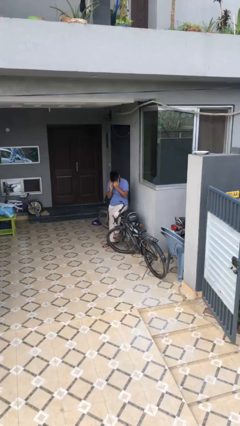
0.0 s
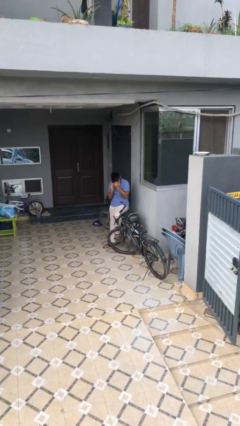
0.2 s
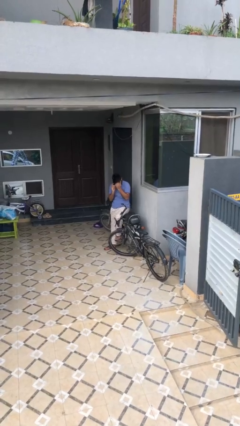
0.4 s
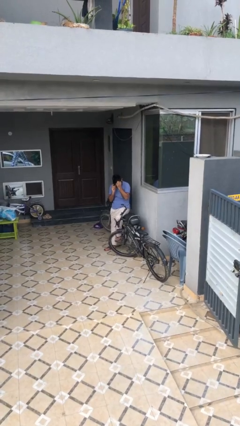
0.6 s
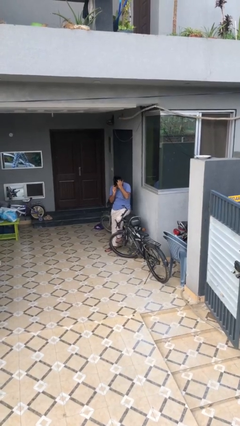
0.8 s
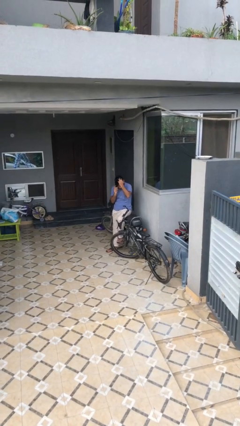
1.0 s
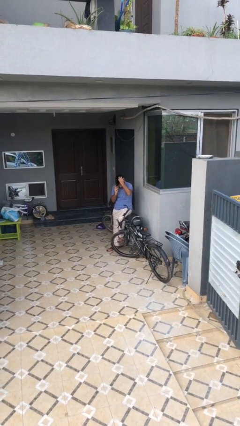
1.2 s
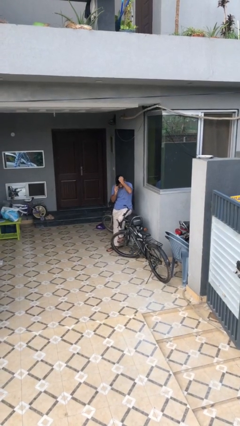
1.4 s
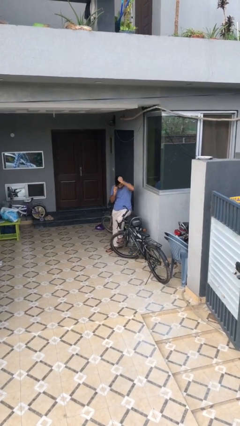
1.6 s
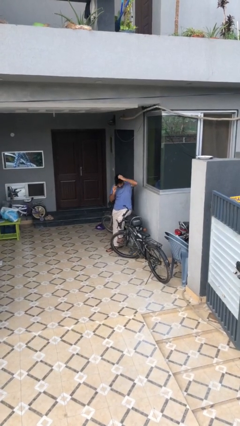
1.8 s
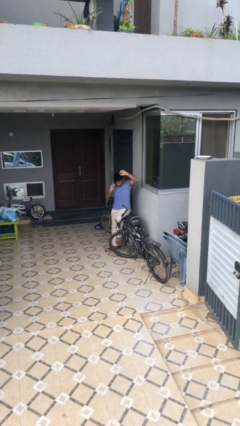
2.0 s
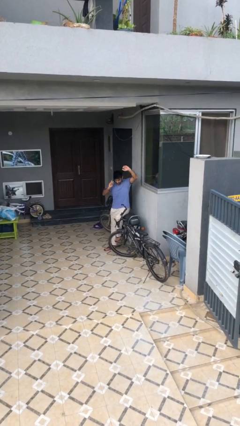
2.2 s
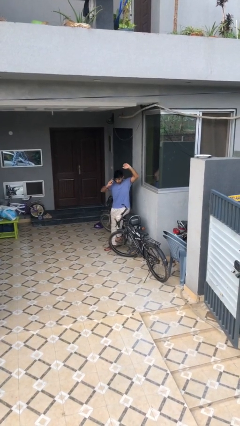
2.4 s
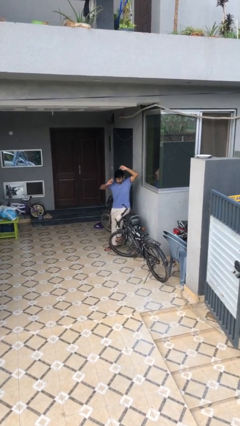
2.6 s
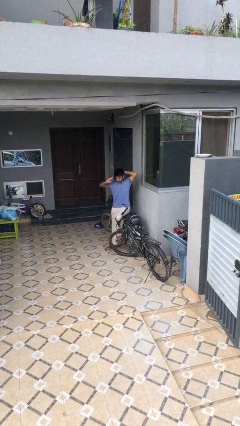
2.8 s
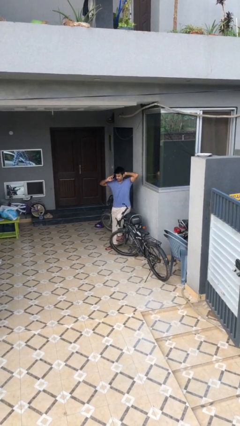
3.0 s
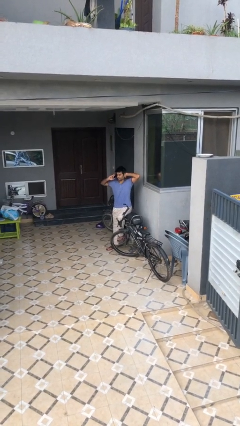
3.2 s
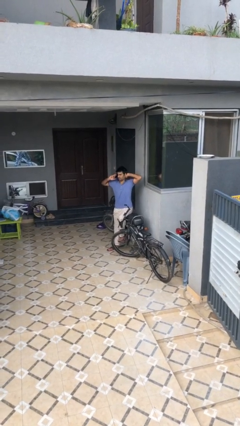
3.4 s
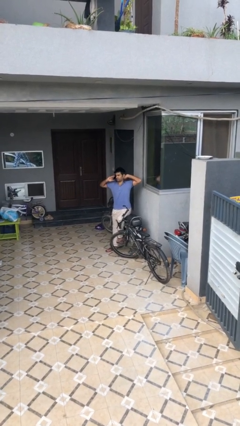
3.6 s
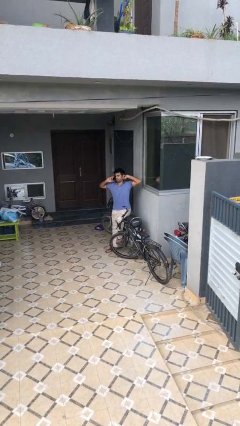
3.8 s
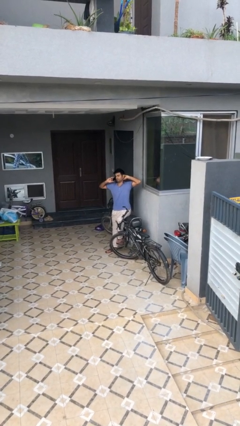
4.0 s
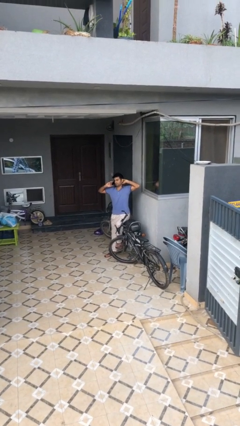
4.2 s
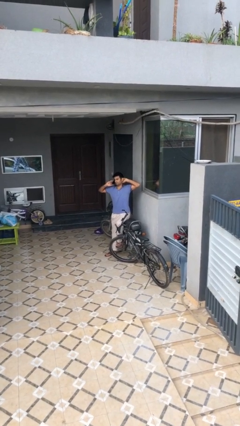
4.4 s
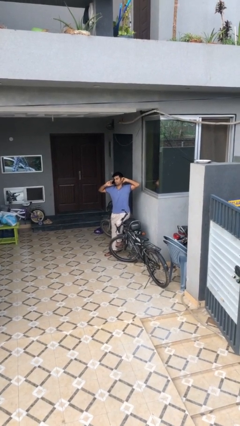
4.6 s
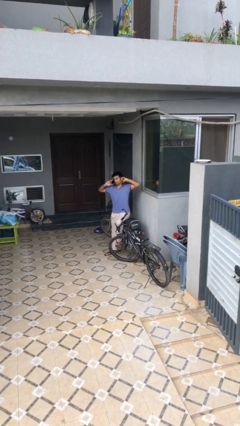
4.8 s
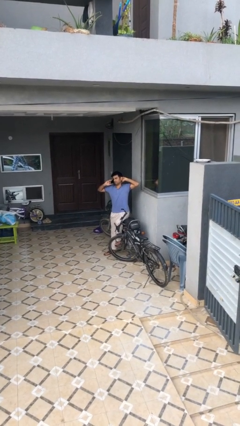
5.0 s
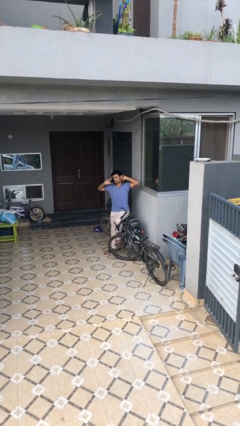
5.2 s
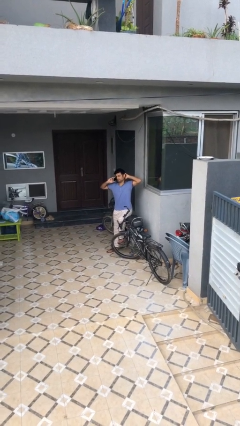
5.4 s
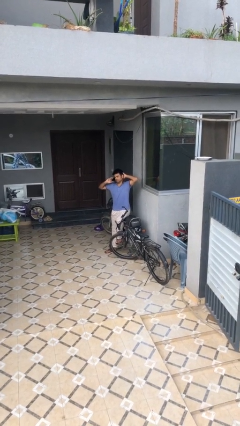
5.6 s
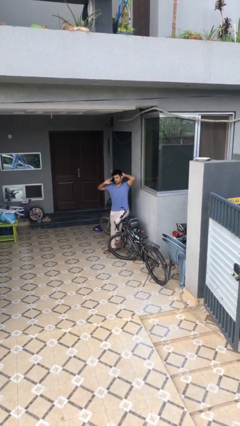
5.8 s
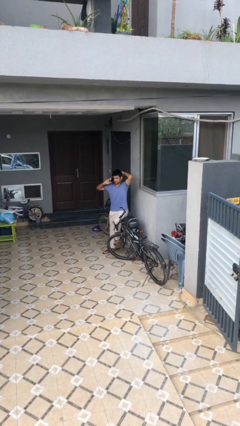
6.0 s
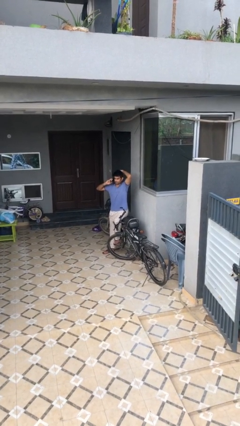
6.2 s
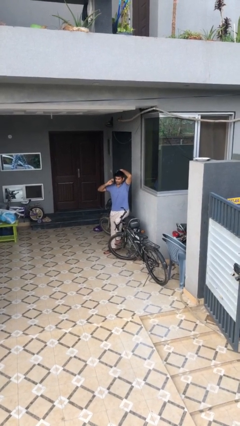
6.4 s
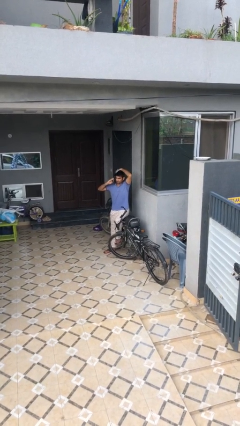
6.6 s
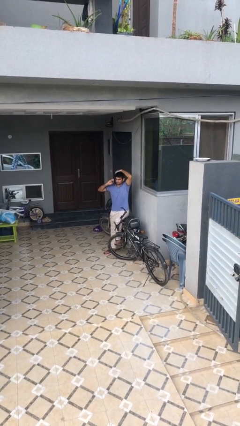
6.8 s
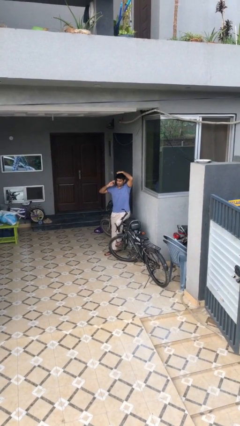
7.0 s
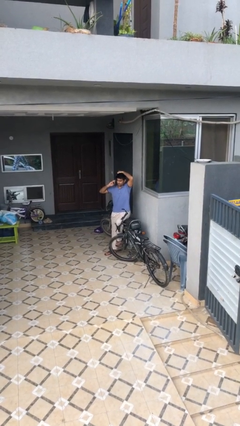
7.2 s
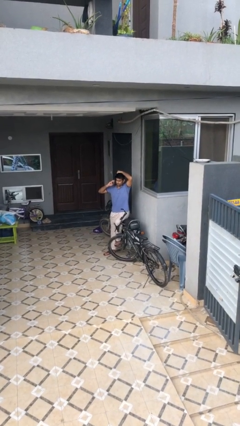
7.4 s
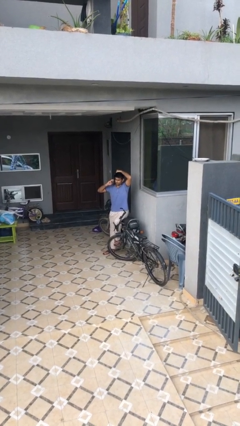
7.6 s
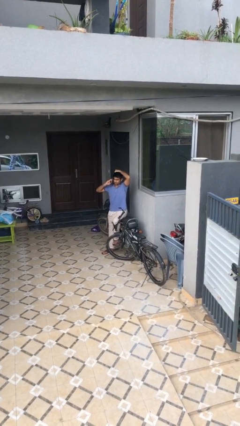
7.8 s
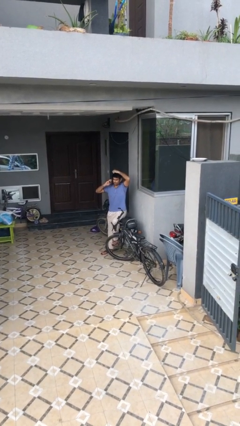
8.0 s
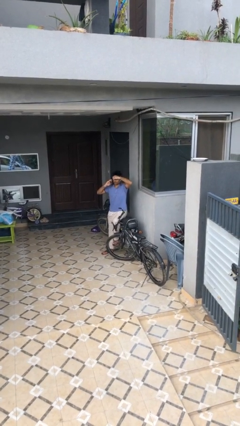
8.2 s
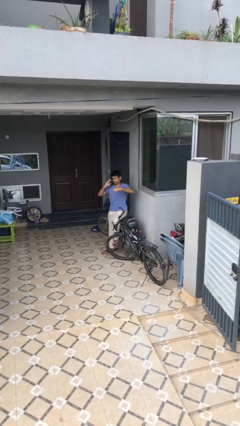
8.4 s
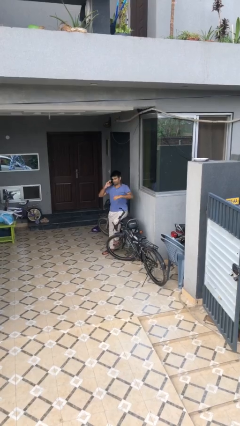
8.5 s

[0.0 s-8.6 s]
person talks on phone

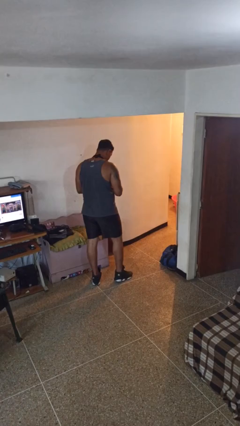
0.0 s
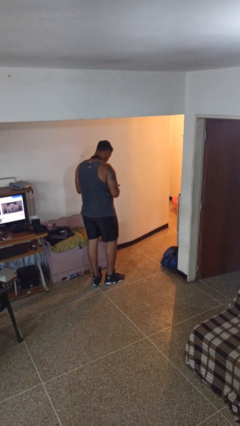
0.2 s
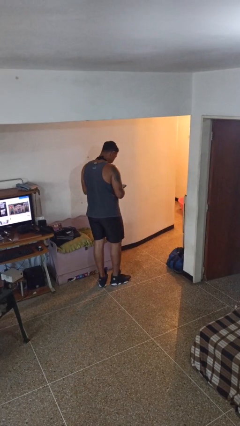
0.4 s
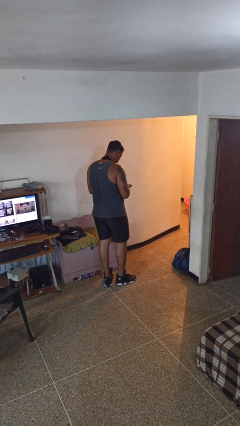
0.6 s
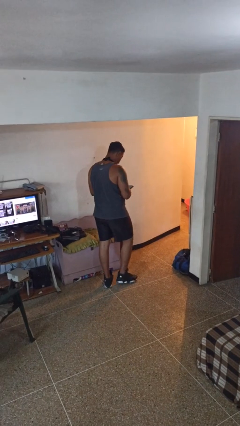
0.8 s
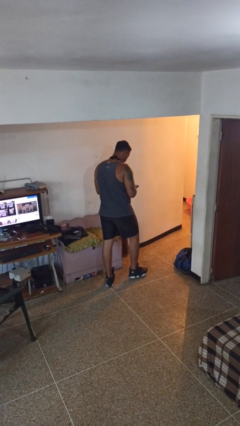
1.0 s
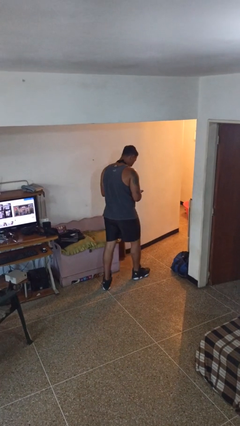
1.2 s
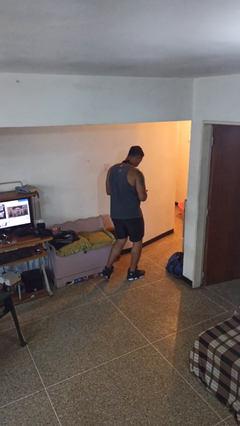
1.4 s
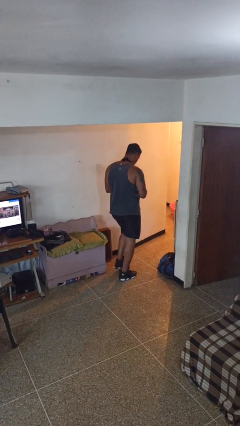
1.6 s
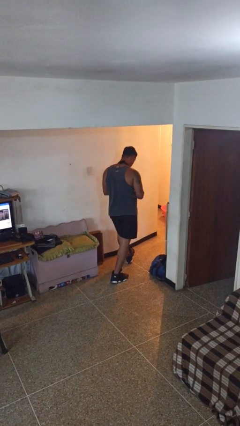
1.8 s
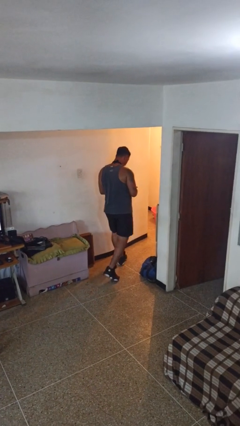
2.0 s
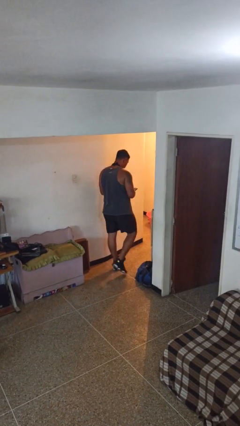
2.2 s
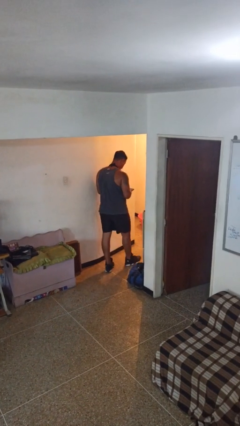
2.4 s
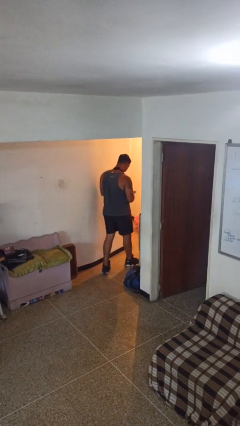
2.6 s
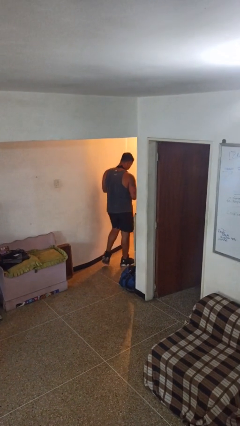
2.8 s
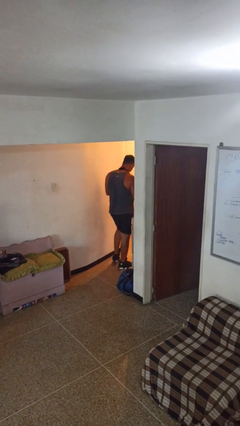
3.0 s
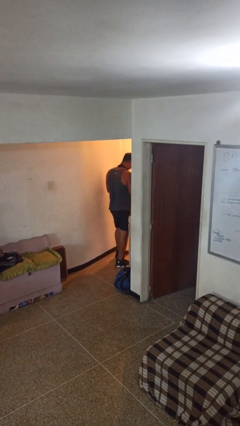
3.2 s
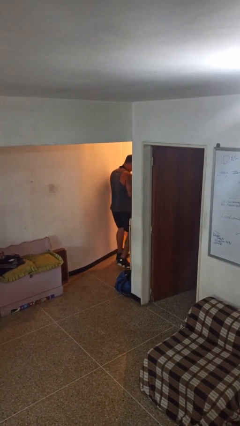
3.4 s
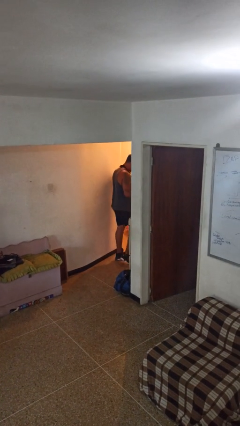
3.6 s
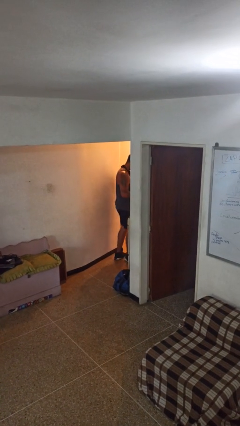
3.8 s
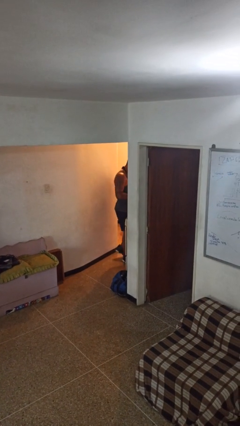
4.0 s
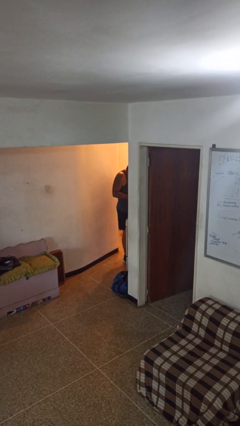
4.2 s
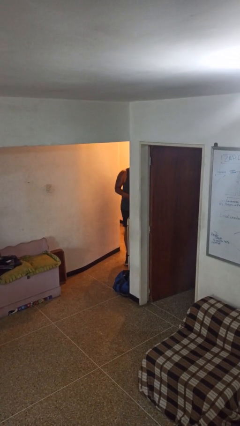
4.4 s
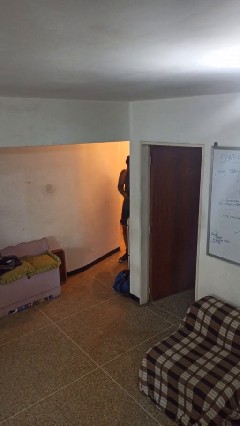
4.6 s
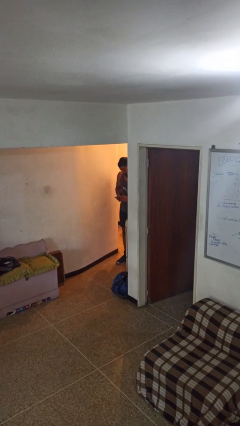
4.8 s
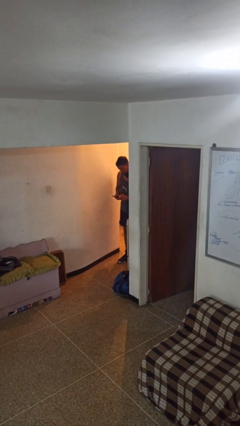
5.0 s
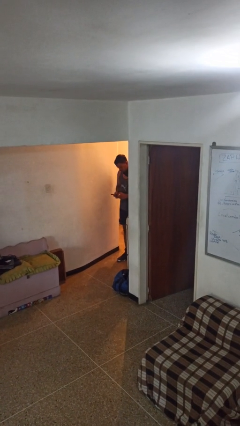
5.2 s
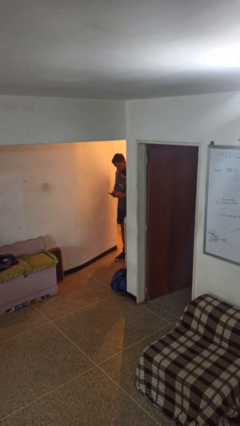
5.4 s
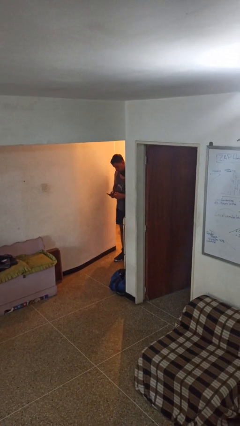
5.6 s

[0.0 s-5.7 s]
person exits scene through structure

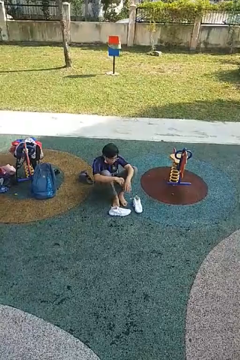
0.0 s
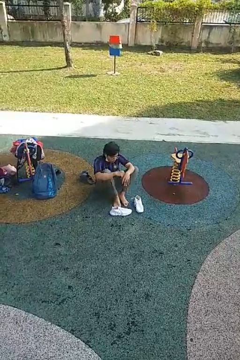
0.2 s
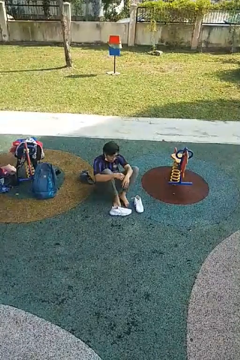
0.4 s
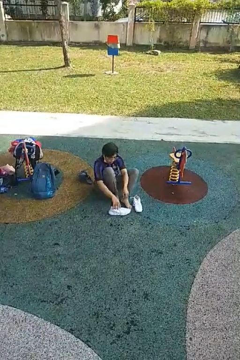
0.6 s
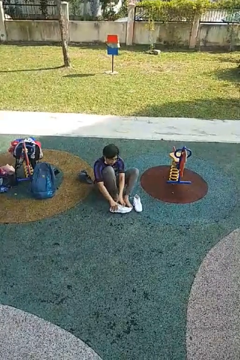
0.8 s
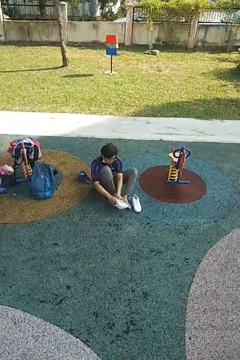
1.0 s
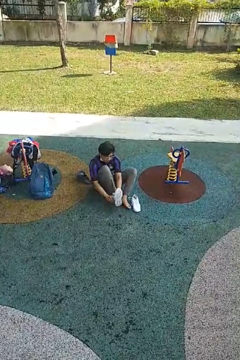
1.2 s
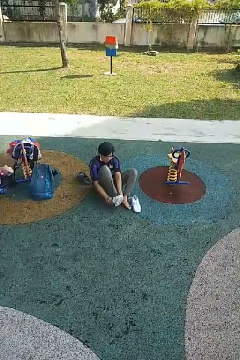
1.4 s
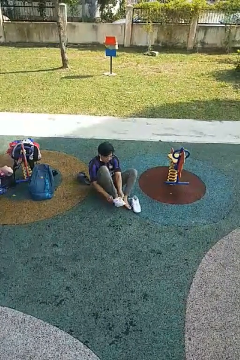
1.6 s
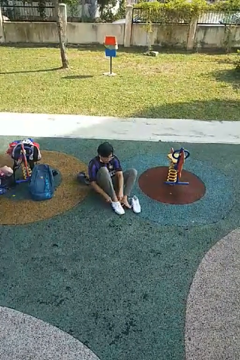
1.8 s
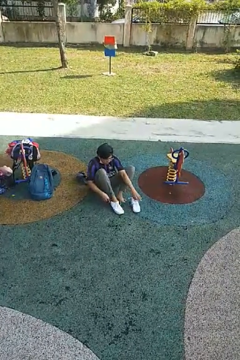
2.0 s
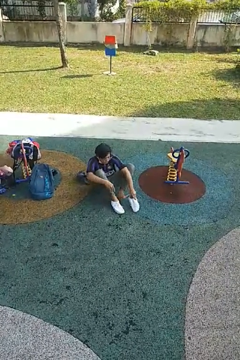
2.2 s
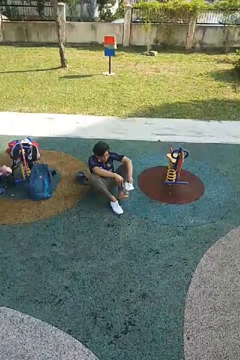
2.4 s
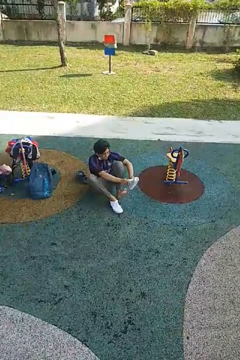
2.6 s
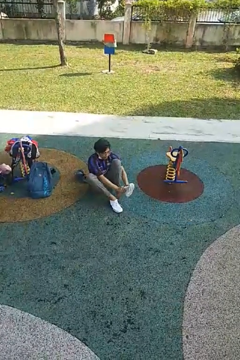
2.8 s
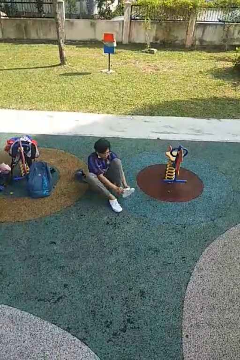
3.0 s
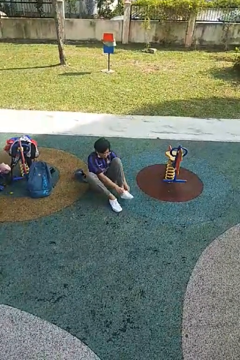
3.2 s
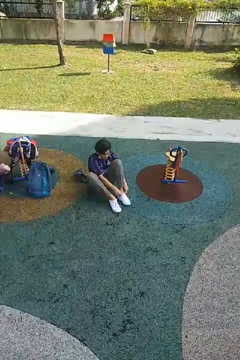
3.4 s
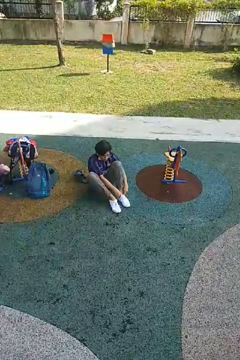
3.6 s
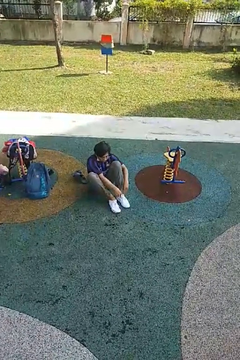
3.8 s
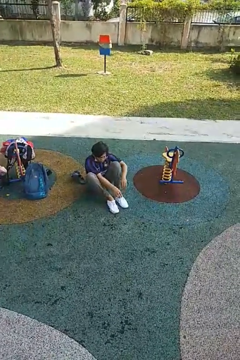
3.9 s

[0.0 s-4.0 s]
person puts on shoes

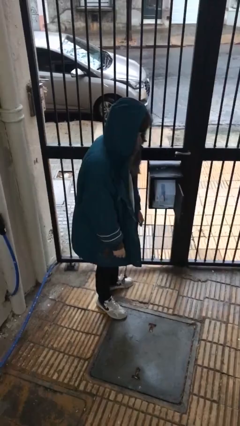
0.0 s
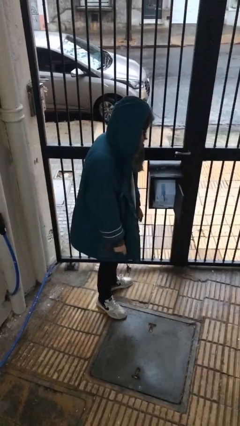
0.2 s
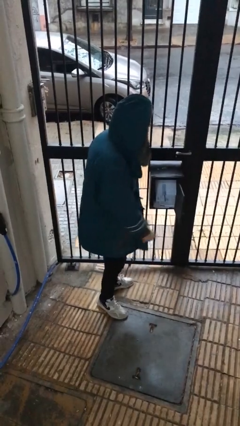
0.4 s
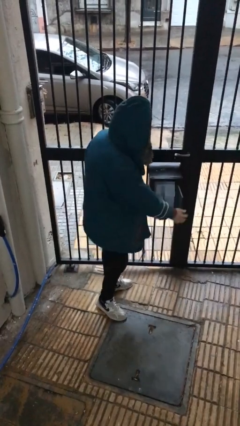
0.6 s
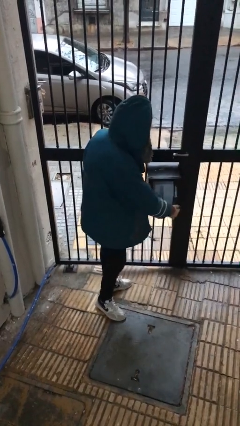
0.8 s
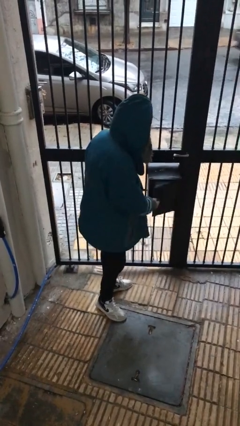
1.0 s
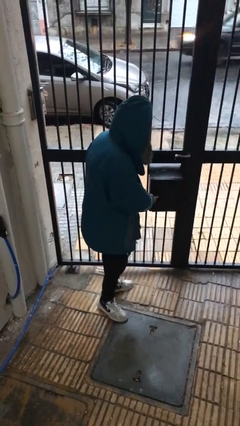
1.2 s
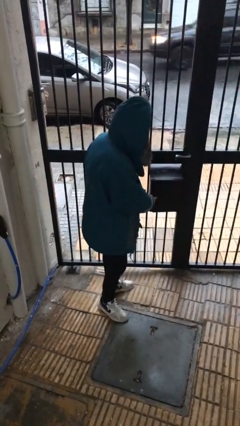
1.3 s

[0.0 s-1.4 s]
person closes mailbox
